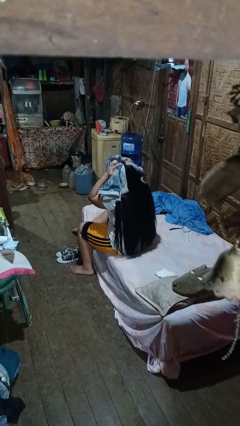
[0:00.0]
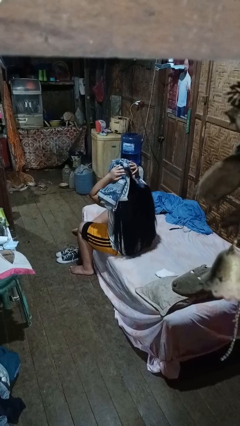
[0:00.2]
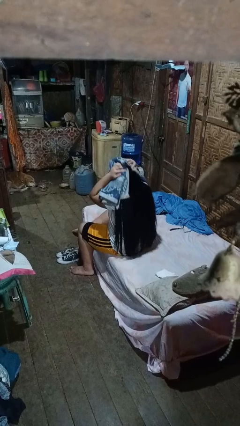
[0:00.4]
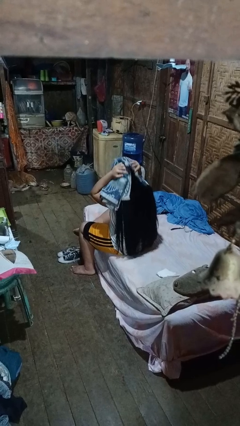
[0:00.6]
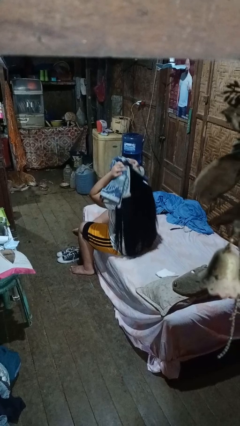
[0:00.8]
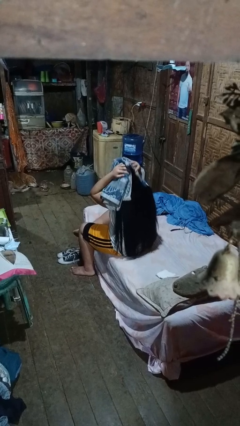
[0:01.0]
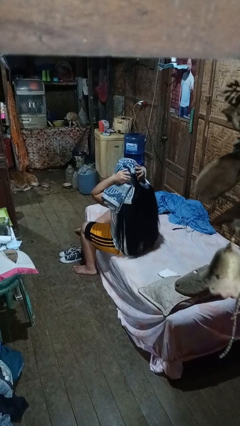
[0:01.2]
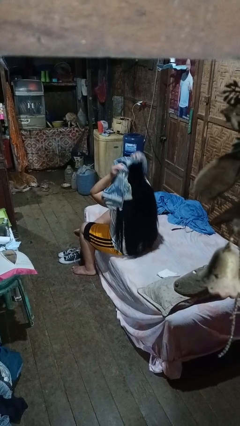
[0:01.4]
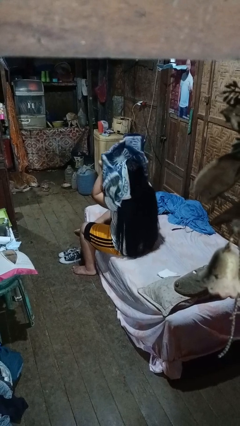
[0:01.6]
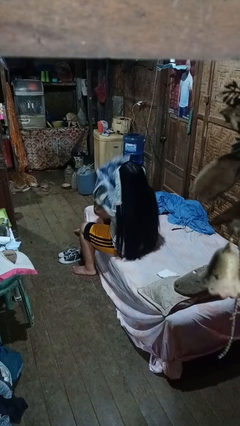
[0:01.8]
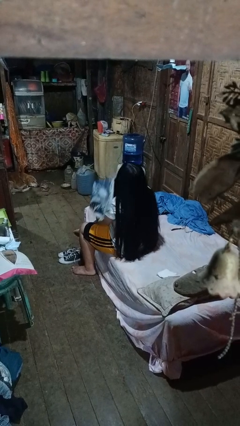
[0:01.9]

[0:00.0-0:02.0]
person dries hair with towel

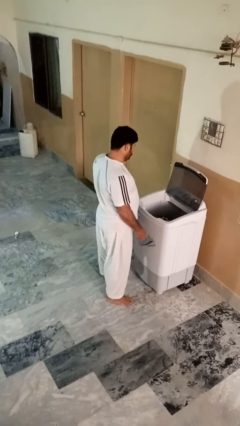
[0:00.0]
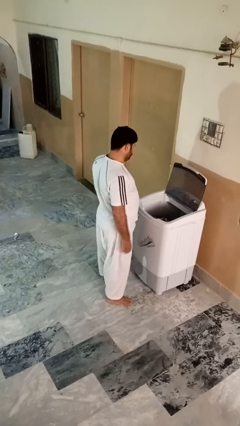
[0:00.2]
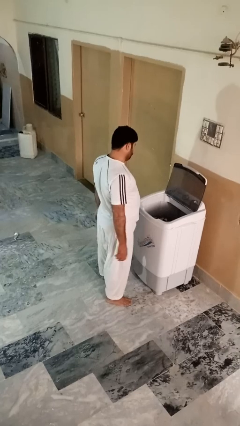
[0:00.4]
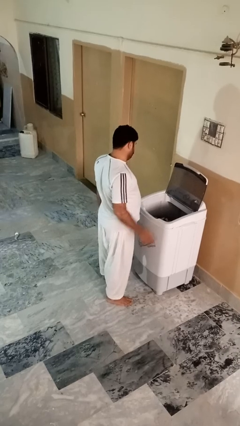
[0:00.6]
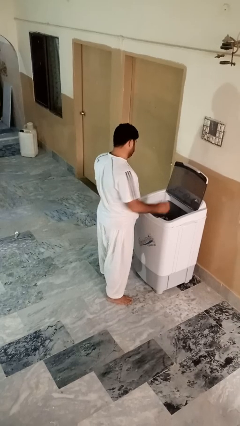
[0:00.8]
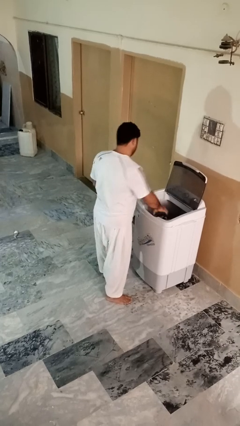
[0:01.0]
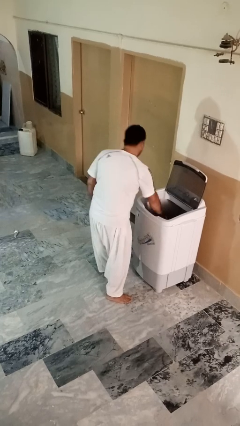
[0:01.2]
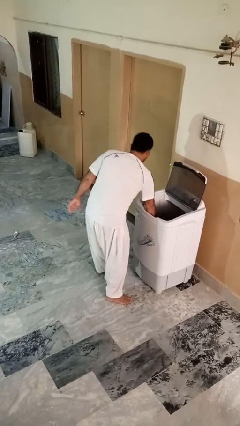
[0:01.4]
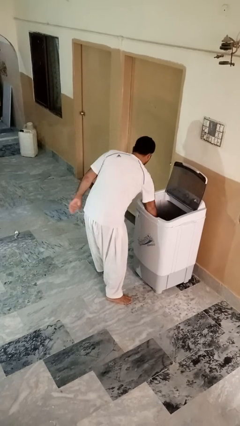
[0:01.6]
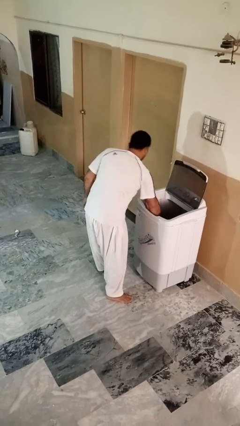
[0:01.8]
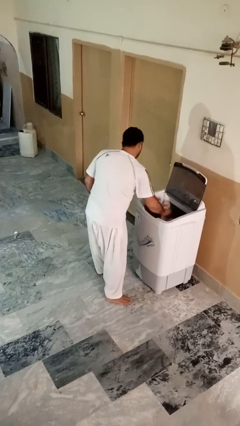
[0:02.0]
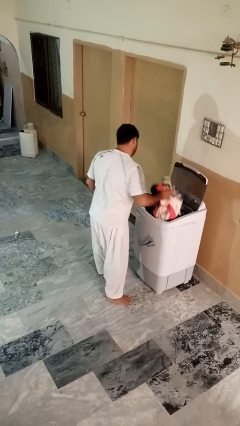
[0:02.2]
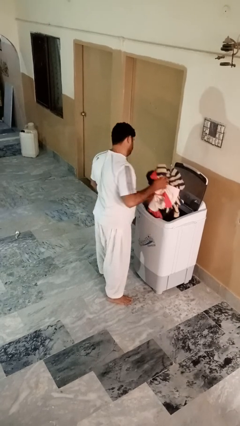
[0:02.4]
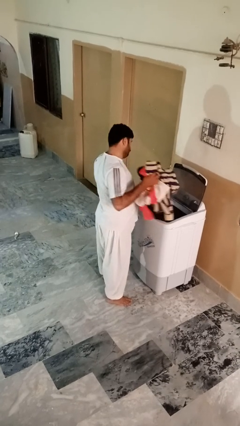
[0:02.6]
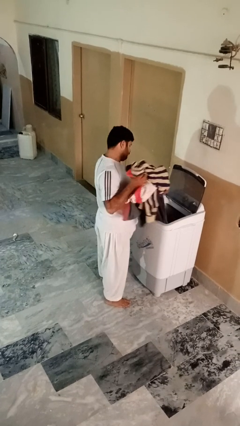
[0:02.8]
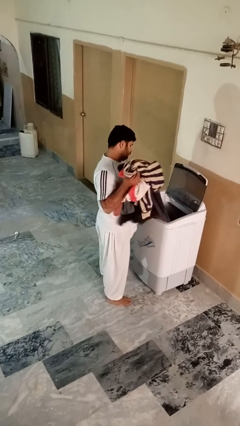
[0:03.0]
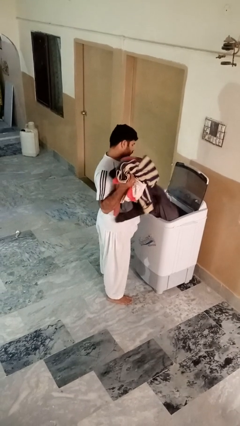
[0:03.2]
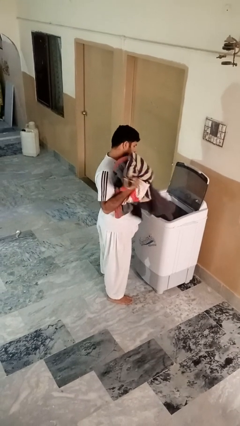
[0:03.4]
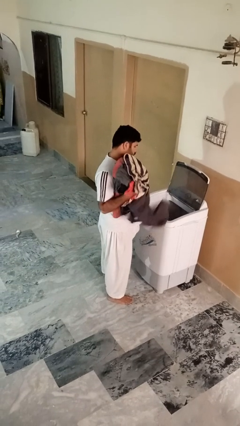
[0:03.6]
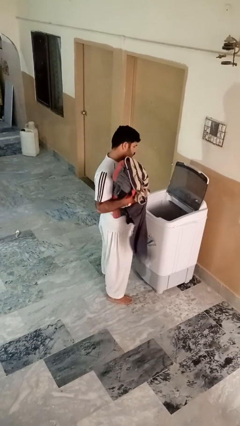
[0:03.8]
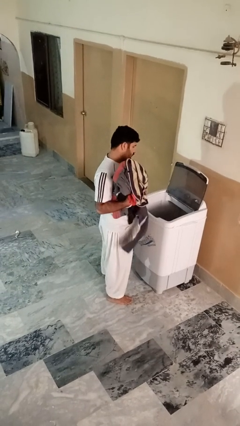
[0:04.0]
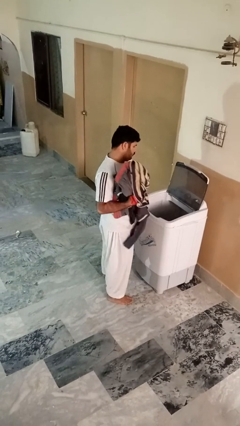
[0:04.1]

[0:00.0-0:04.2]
person unloads clotheswasher

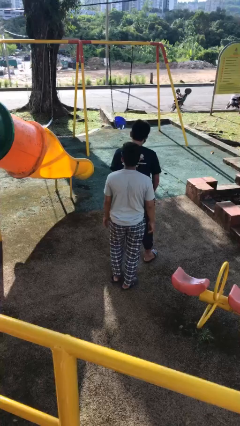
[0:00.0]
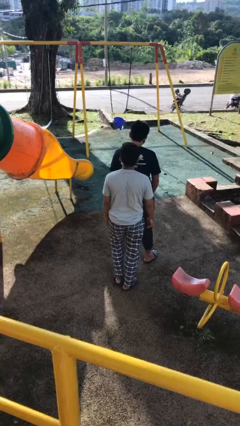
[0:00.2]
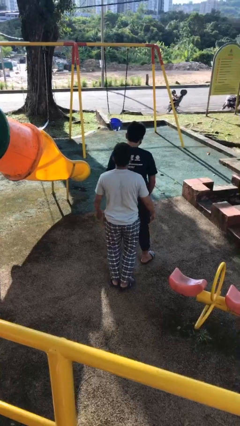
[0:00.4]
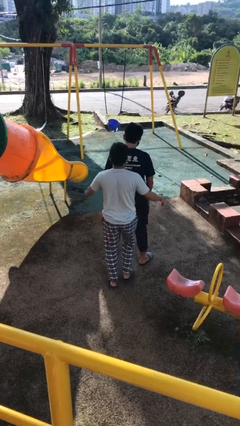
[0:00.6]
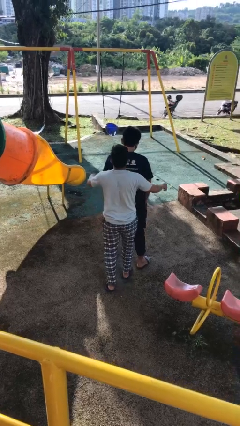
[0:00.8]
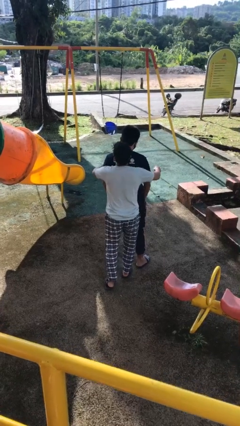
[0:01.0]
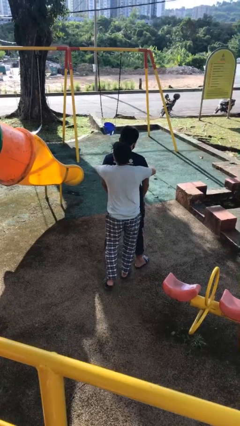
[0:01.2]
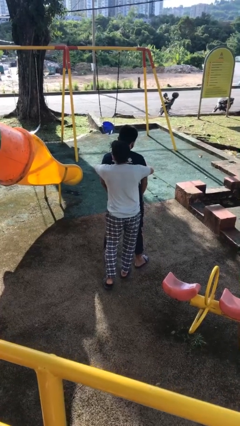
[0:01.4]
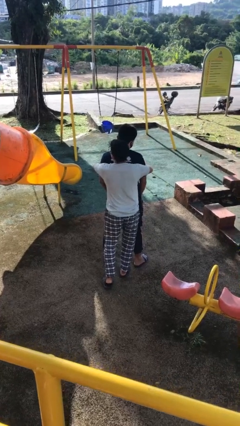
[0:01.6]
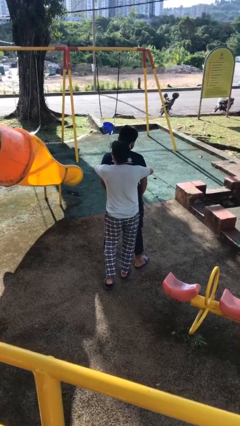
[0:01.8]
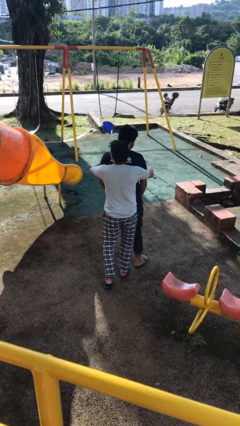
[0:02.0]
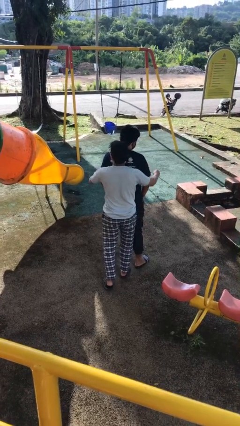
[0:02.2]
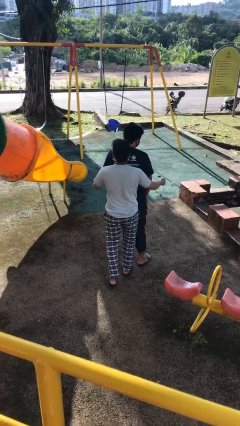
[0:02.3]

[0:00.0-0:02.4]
person hugs person from behind

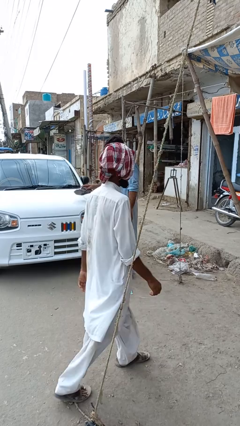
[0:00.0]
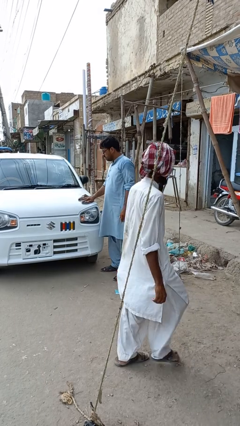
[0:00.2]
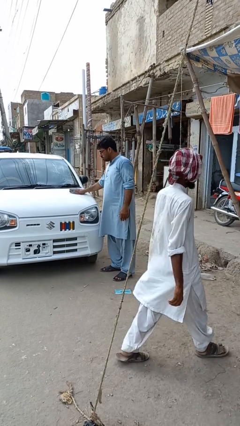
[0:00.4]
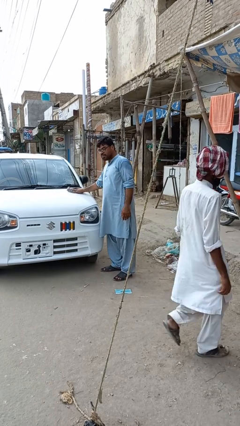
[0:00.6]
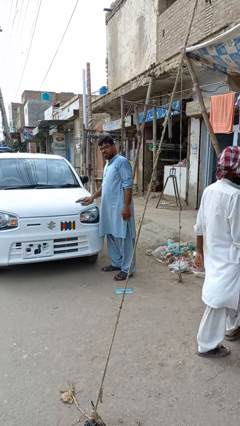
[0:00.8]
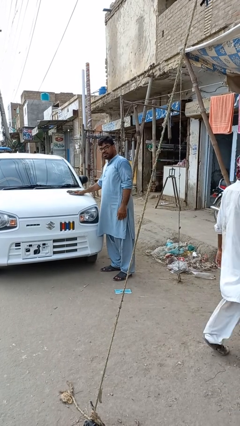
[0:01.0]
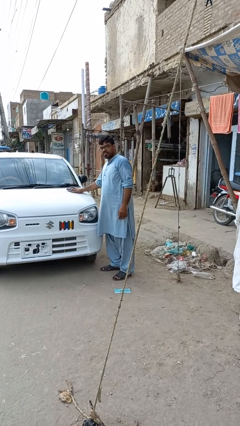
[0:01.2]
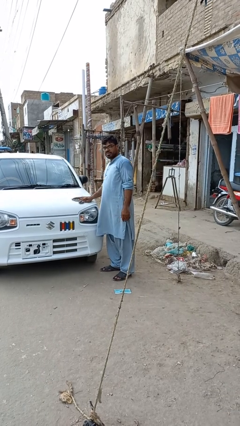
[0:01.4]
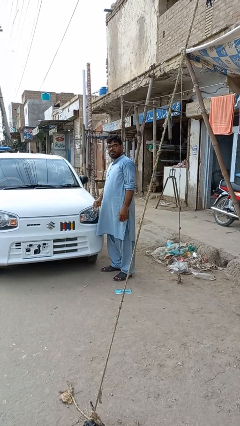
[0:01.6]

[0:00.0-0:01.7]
person polishes car with rag

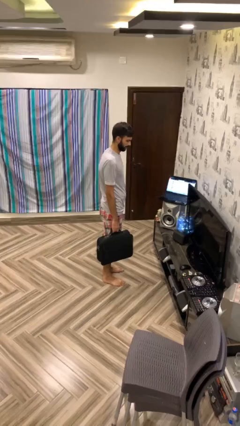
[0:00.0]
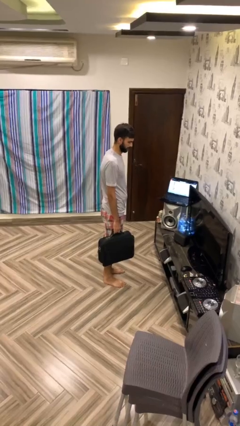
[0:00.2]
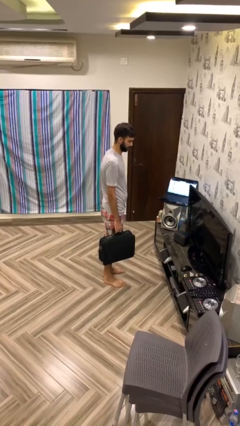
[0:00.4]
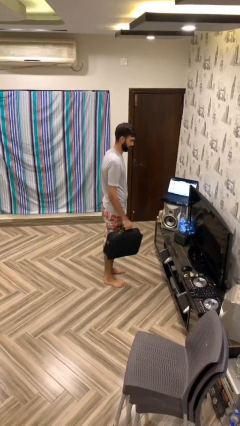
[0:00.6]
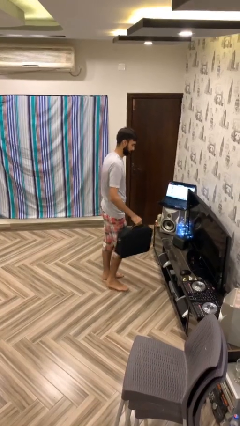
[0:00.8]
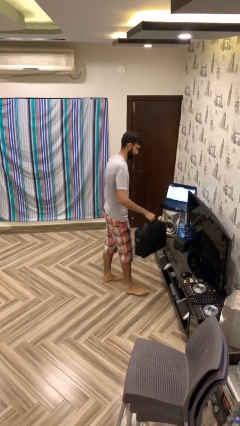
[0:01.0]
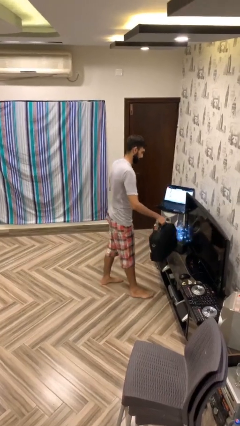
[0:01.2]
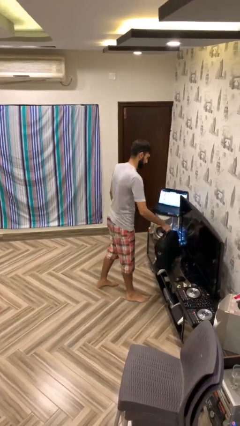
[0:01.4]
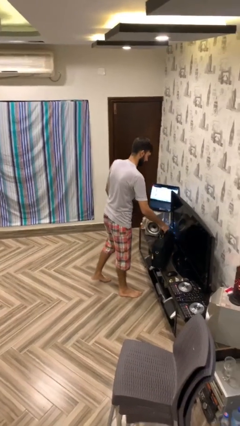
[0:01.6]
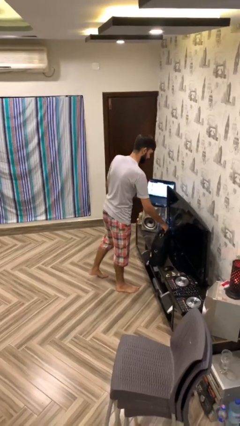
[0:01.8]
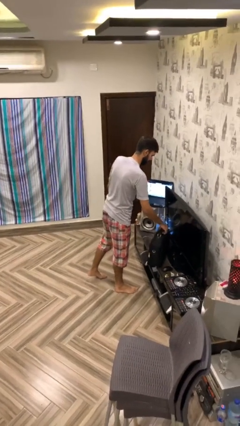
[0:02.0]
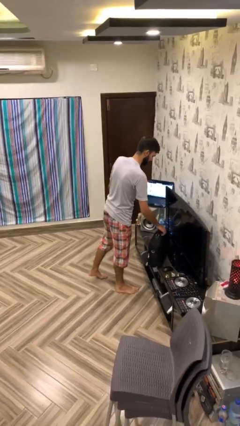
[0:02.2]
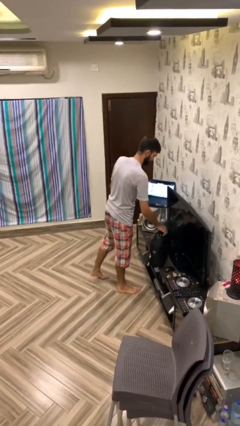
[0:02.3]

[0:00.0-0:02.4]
person puts down object on table

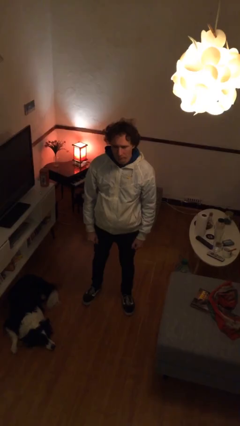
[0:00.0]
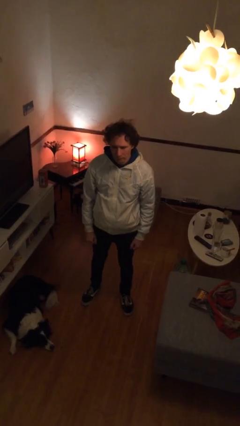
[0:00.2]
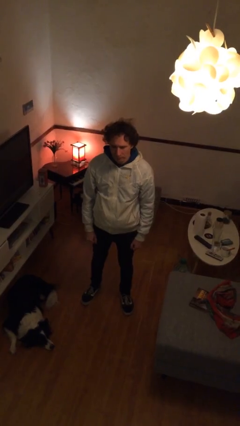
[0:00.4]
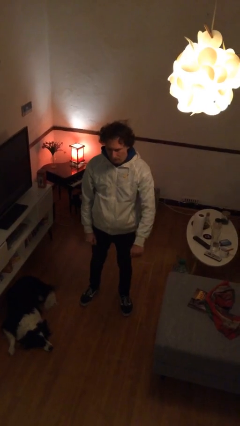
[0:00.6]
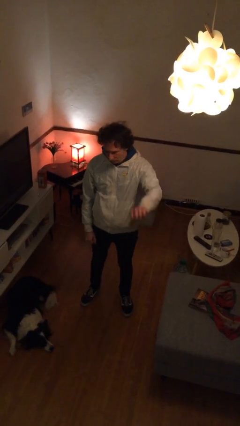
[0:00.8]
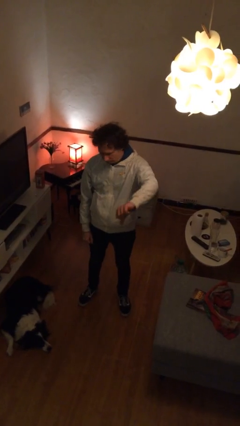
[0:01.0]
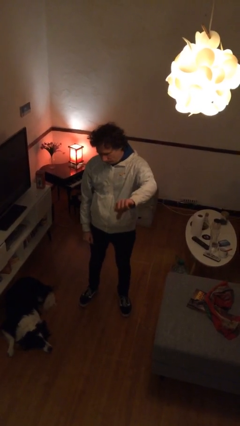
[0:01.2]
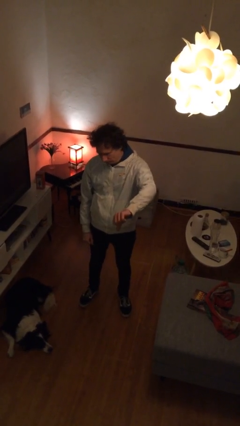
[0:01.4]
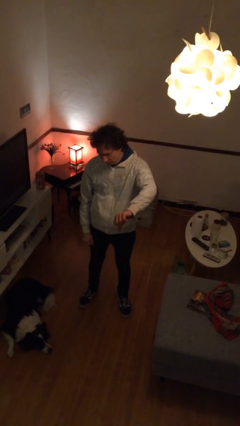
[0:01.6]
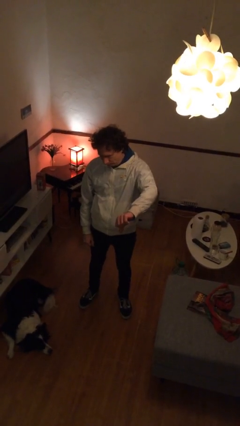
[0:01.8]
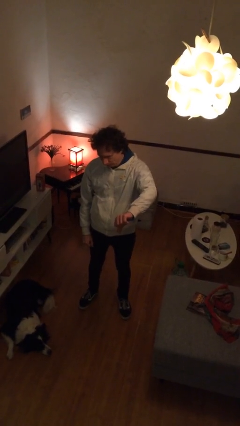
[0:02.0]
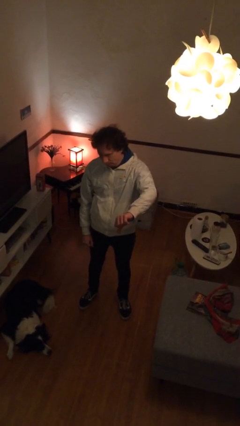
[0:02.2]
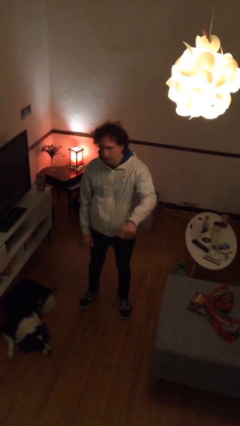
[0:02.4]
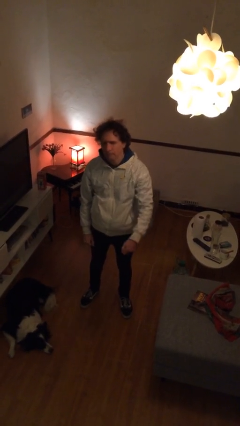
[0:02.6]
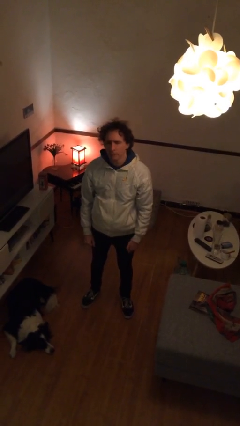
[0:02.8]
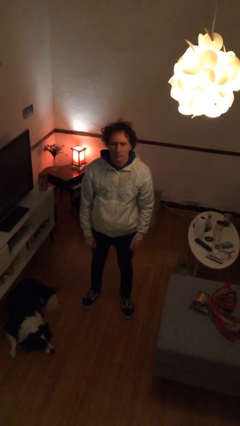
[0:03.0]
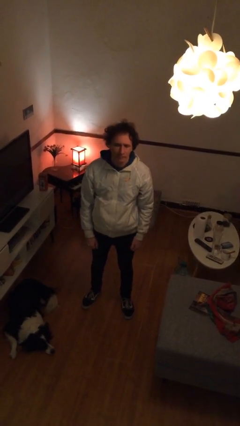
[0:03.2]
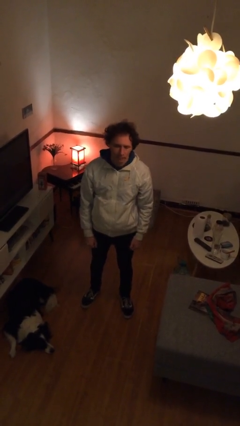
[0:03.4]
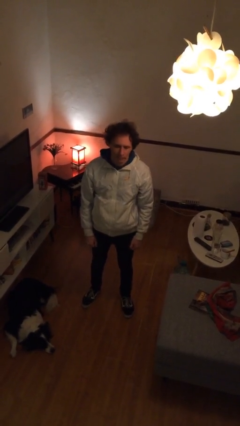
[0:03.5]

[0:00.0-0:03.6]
person gestures thumbs down

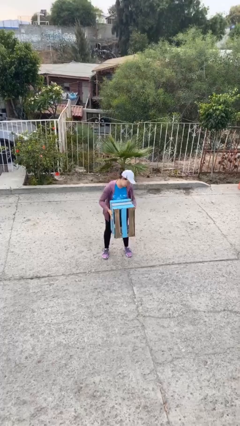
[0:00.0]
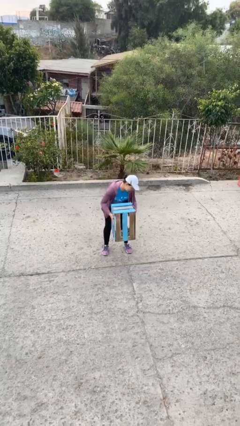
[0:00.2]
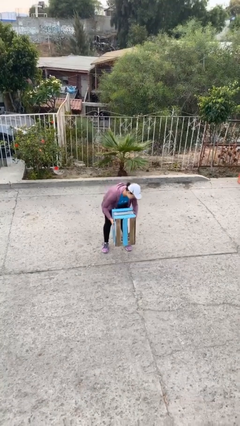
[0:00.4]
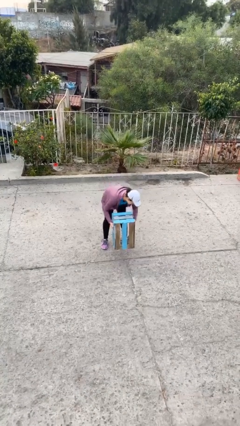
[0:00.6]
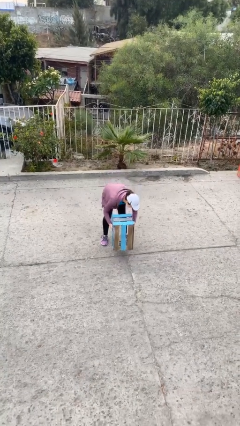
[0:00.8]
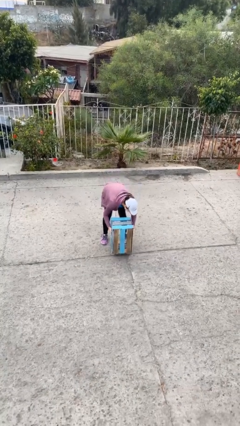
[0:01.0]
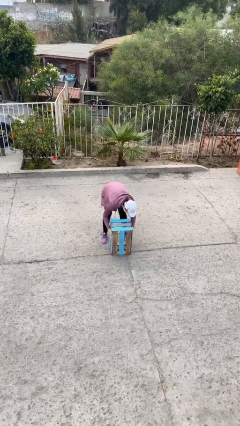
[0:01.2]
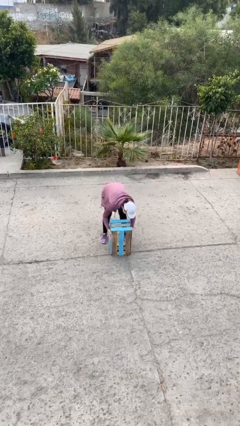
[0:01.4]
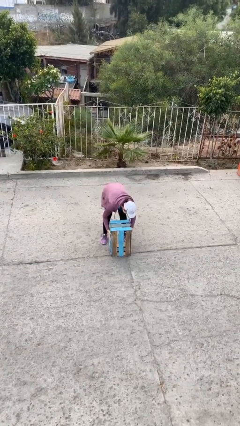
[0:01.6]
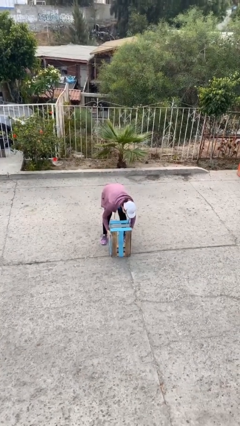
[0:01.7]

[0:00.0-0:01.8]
person puts down object on floor
